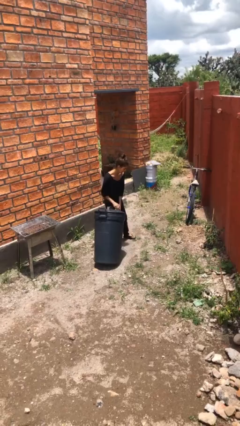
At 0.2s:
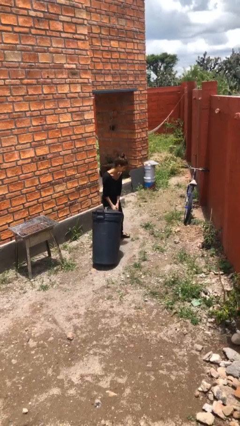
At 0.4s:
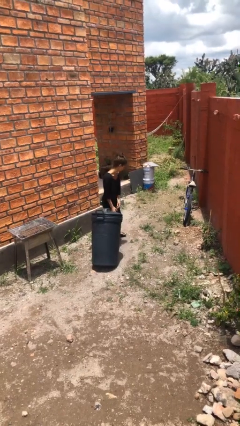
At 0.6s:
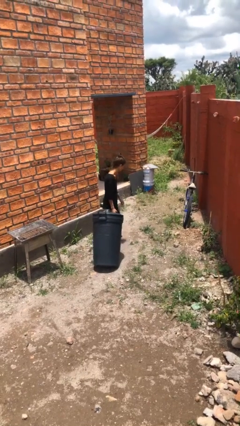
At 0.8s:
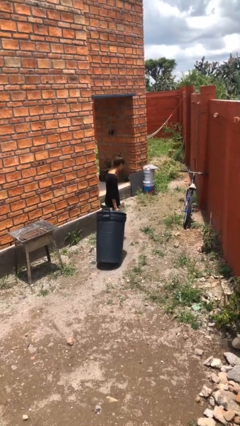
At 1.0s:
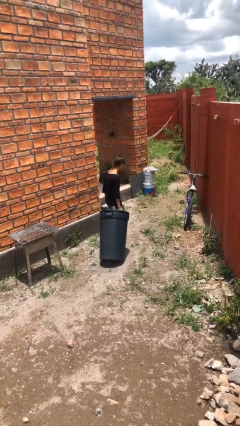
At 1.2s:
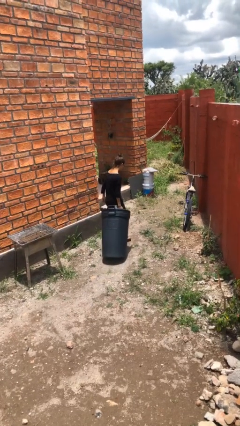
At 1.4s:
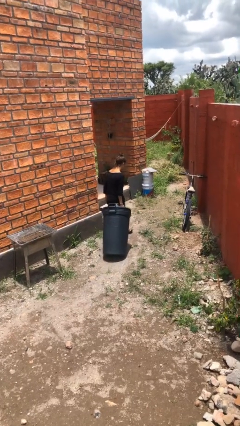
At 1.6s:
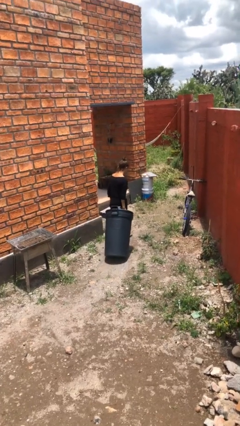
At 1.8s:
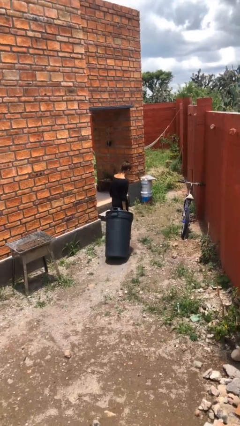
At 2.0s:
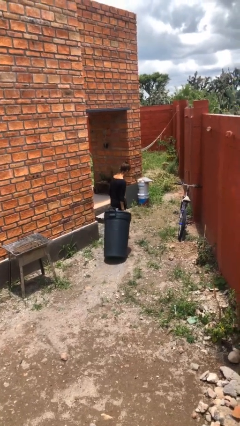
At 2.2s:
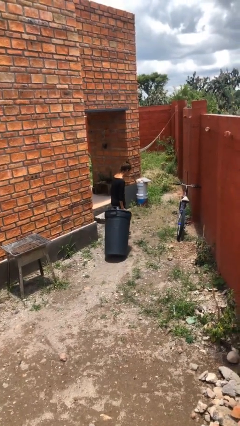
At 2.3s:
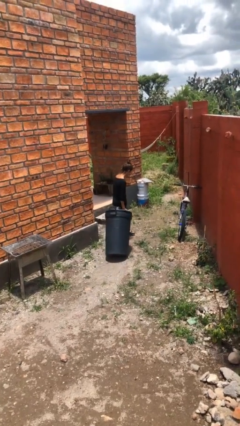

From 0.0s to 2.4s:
person pulls wheeled trashcan

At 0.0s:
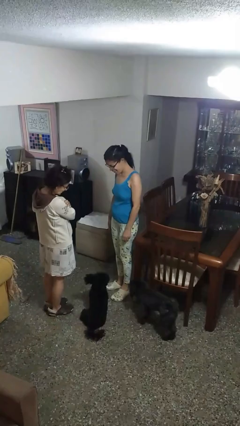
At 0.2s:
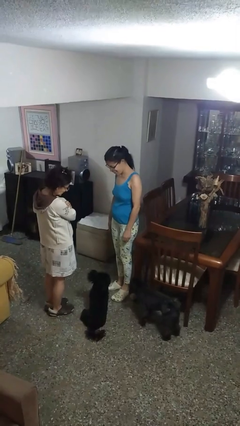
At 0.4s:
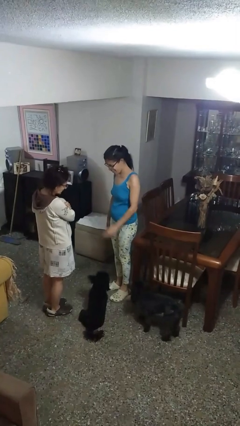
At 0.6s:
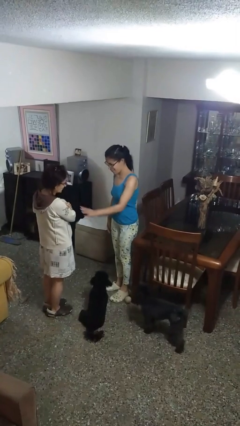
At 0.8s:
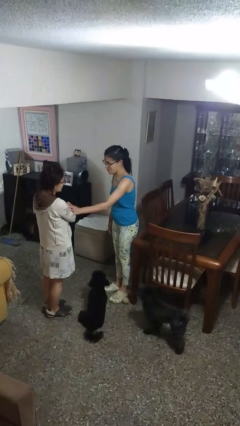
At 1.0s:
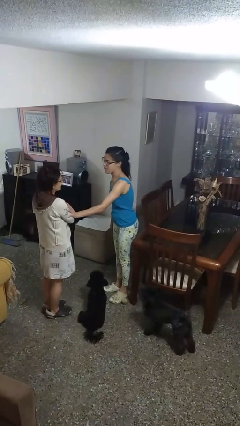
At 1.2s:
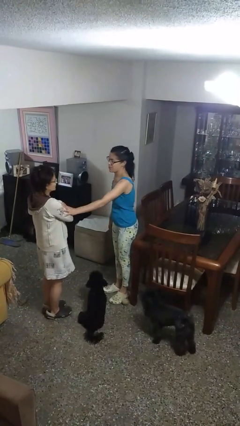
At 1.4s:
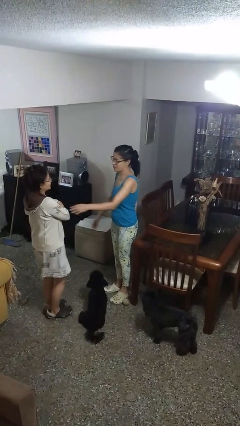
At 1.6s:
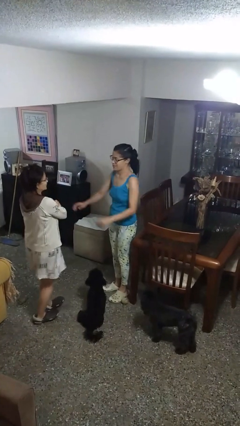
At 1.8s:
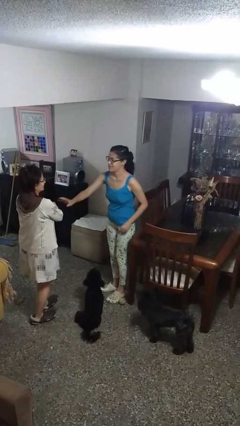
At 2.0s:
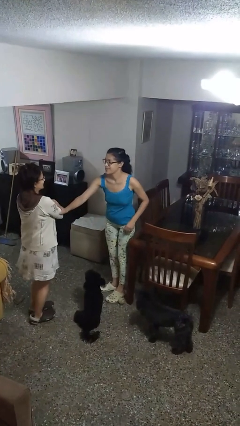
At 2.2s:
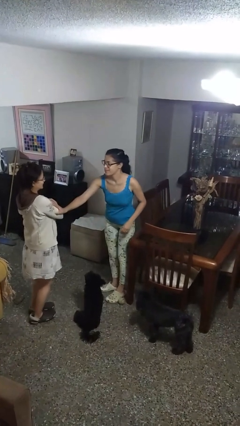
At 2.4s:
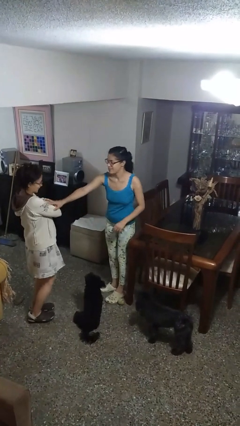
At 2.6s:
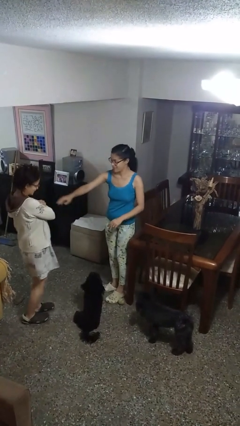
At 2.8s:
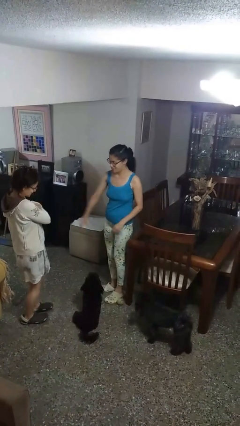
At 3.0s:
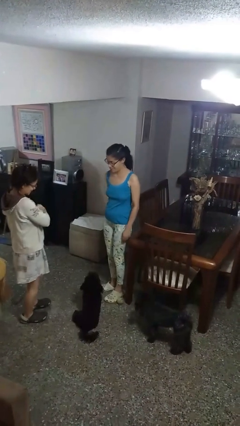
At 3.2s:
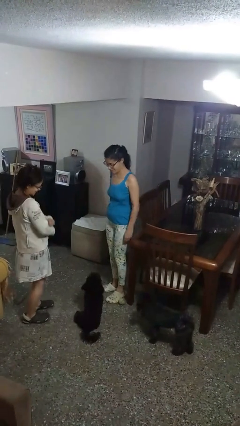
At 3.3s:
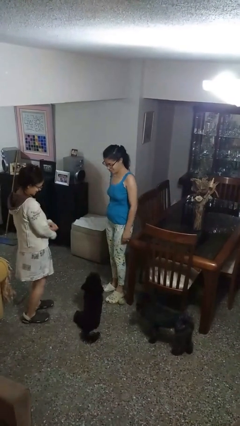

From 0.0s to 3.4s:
person shoves person

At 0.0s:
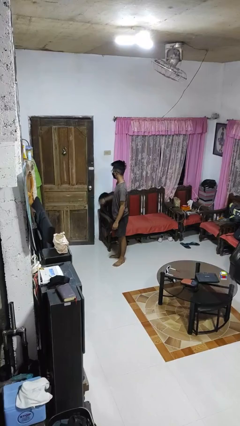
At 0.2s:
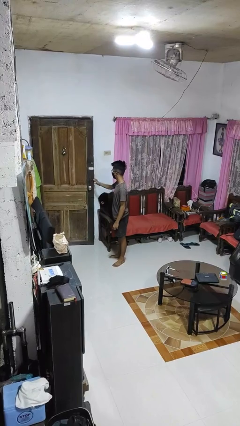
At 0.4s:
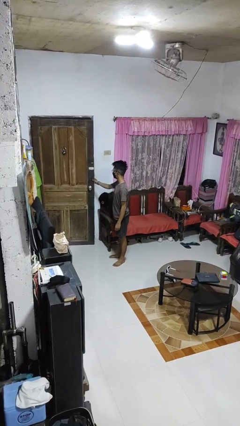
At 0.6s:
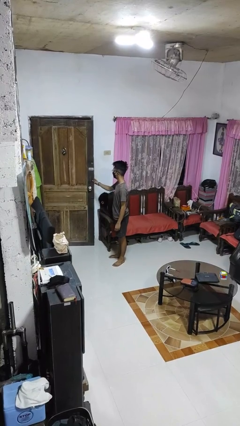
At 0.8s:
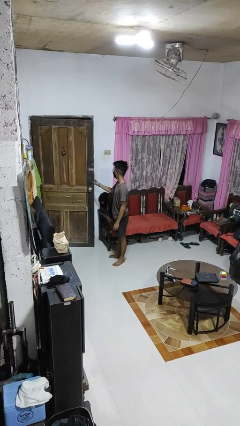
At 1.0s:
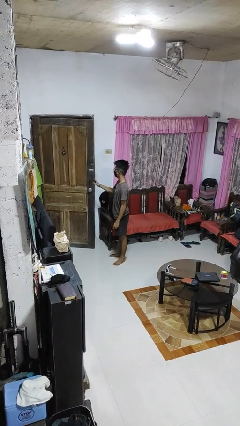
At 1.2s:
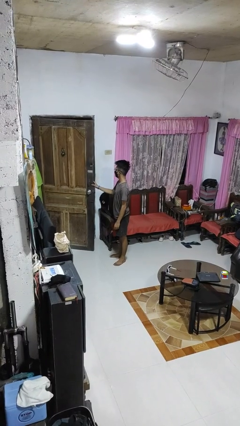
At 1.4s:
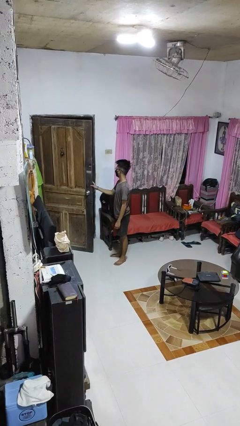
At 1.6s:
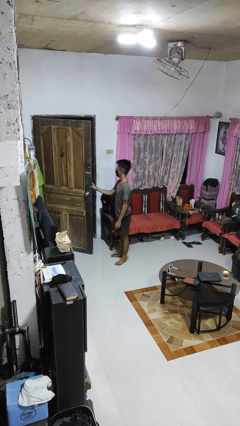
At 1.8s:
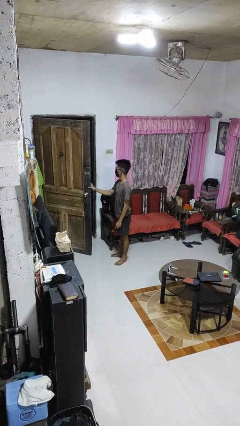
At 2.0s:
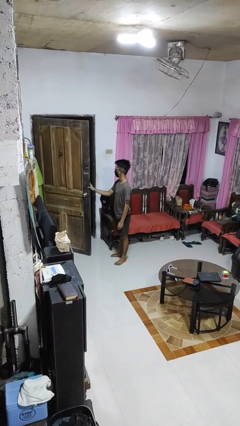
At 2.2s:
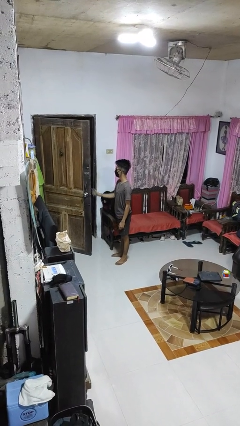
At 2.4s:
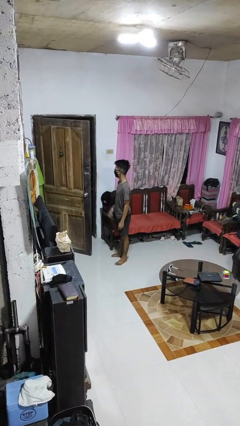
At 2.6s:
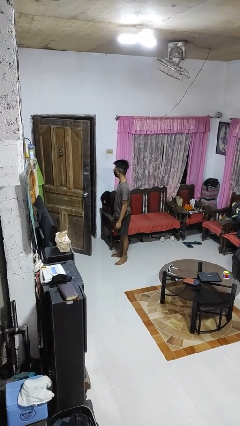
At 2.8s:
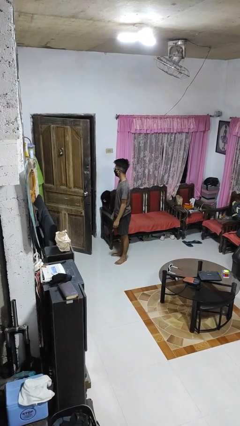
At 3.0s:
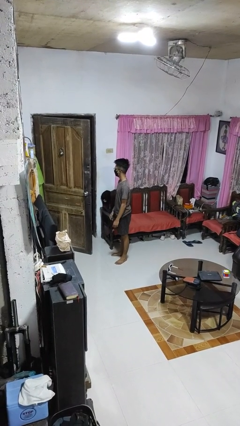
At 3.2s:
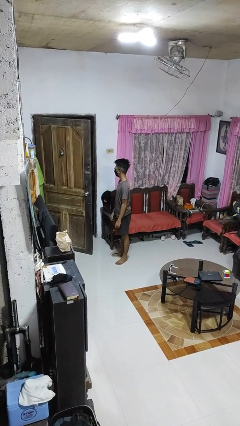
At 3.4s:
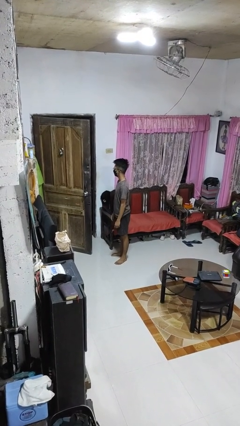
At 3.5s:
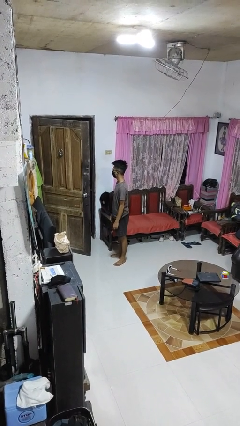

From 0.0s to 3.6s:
person opens facility door

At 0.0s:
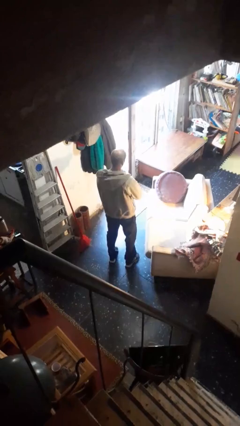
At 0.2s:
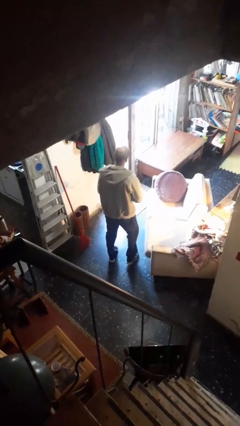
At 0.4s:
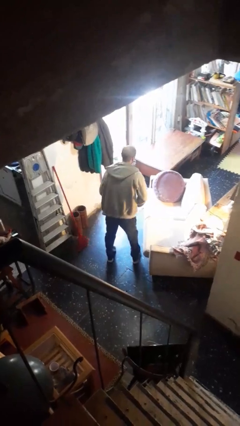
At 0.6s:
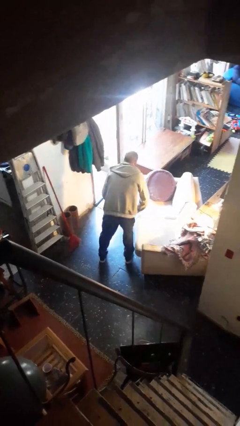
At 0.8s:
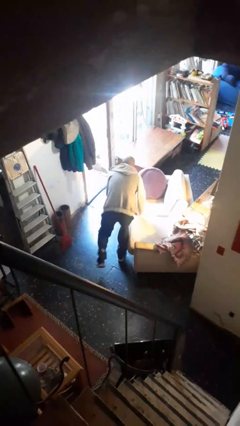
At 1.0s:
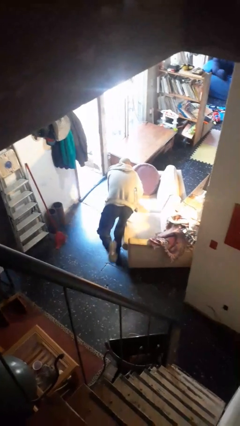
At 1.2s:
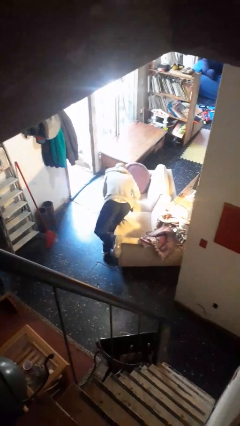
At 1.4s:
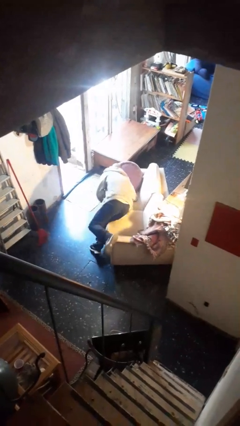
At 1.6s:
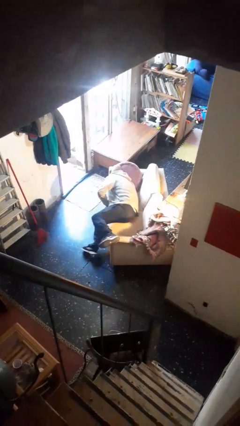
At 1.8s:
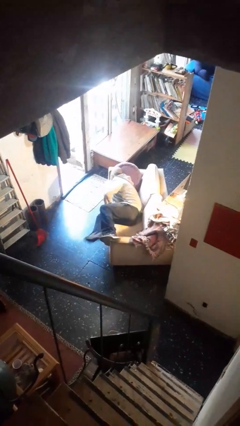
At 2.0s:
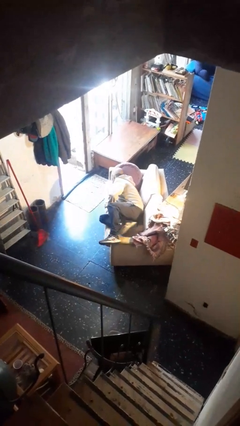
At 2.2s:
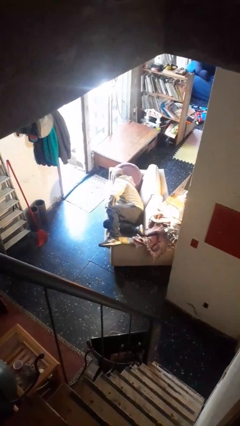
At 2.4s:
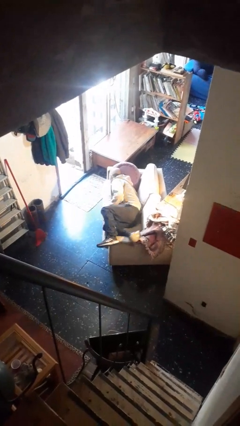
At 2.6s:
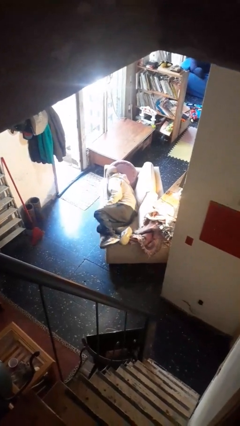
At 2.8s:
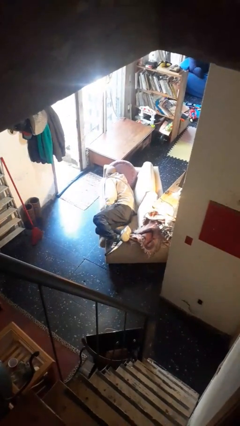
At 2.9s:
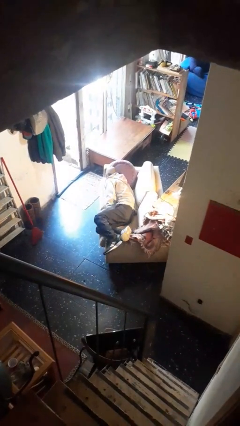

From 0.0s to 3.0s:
person lies down on couch

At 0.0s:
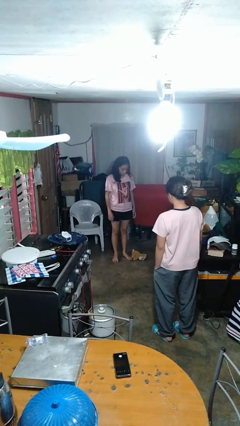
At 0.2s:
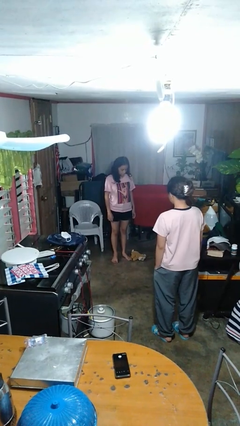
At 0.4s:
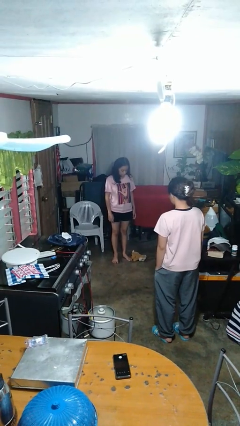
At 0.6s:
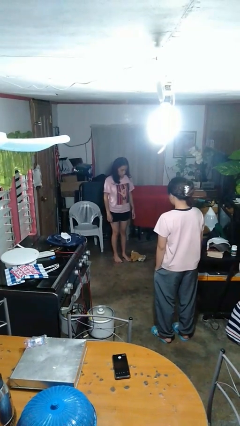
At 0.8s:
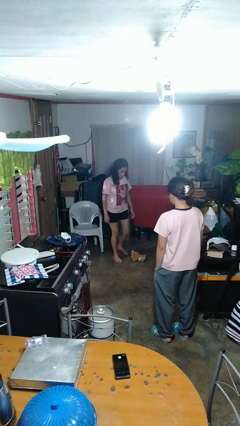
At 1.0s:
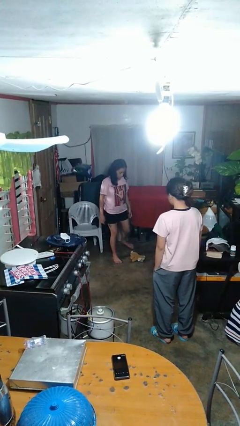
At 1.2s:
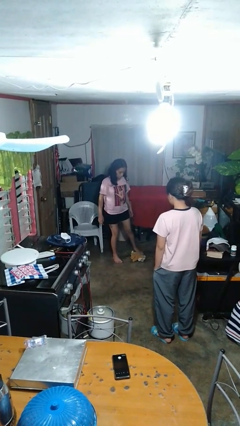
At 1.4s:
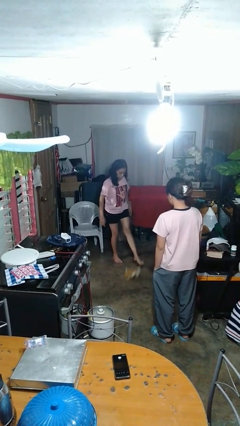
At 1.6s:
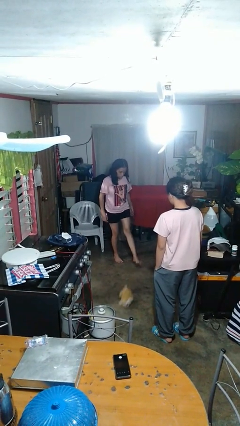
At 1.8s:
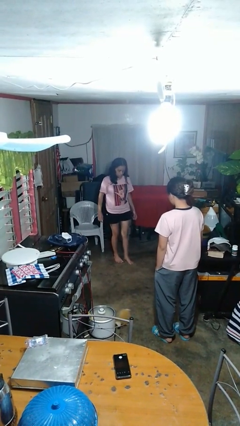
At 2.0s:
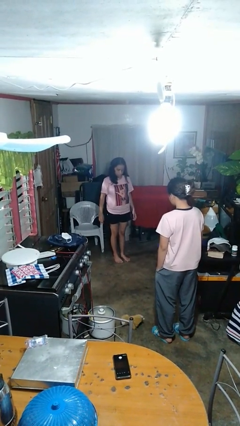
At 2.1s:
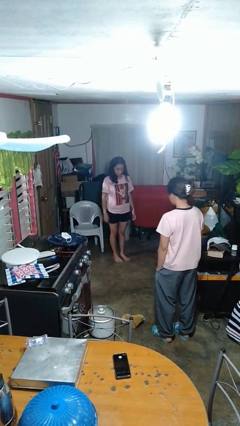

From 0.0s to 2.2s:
person kicks object to person

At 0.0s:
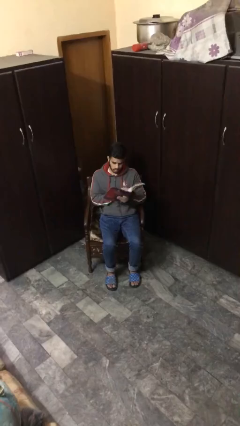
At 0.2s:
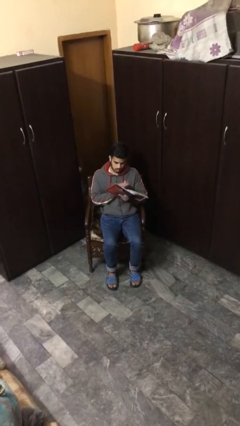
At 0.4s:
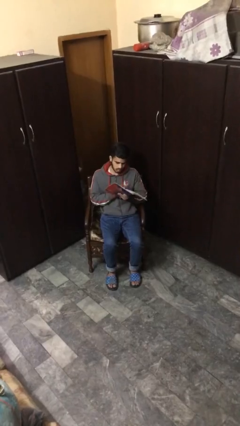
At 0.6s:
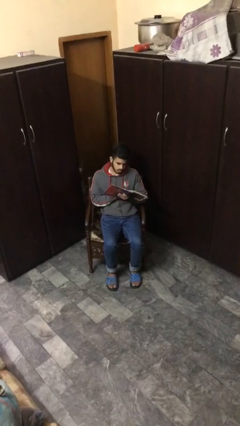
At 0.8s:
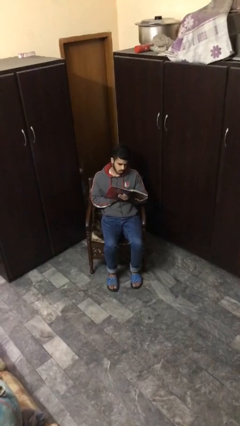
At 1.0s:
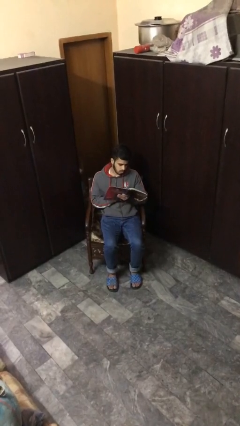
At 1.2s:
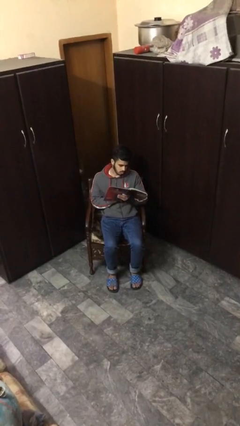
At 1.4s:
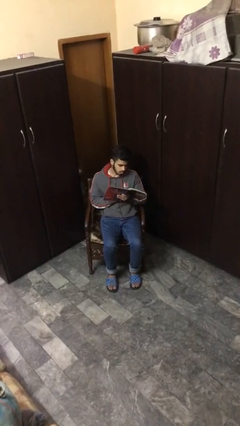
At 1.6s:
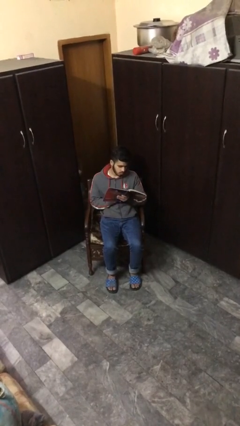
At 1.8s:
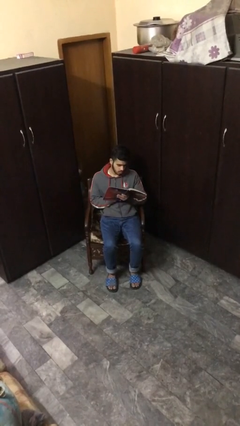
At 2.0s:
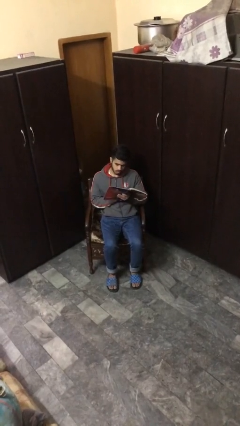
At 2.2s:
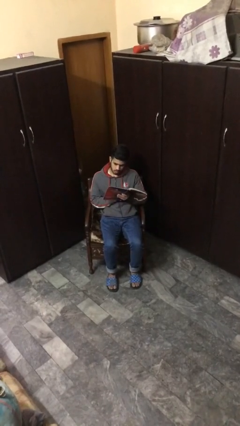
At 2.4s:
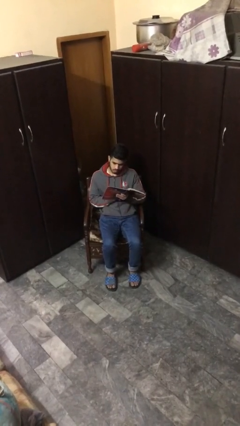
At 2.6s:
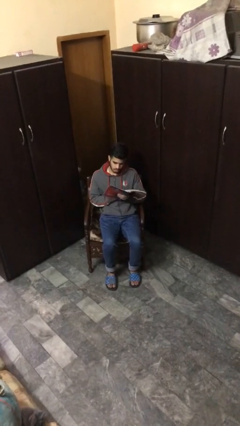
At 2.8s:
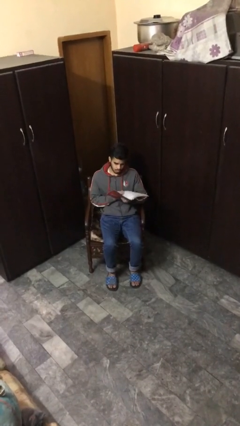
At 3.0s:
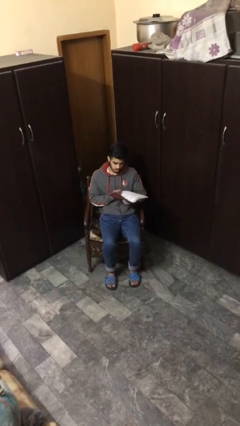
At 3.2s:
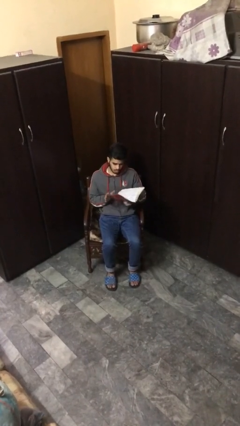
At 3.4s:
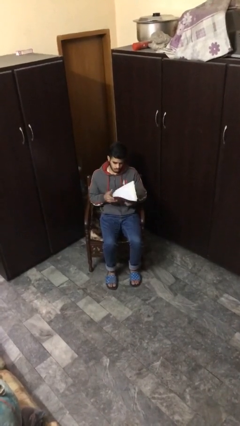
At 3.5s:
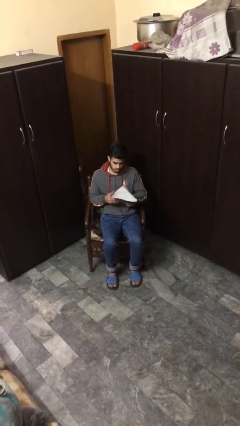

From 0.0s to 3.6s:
person reads document
